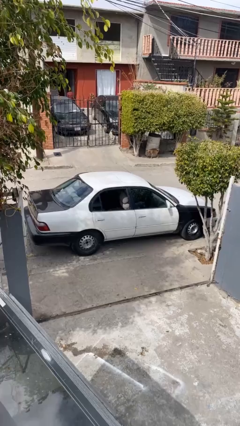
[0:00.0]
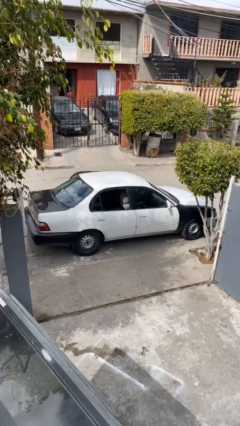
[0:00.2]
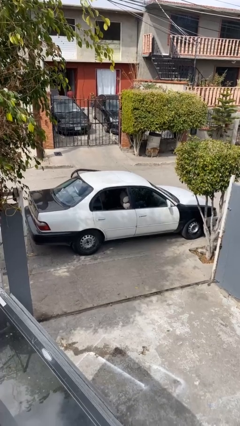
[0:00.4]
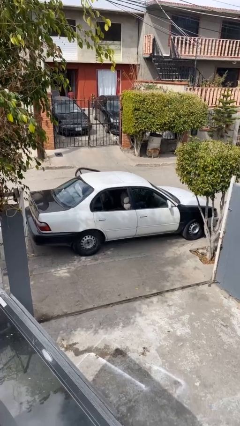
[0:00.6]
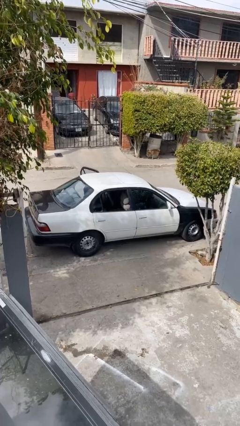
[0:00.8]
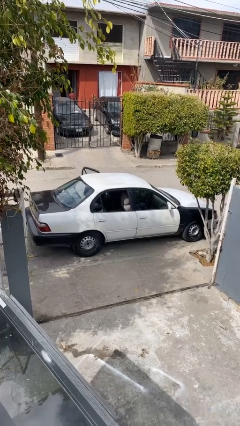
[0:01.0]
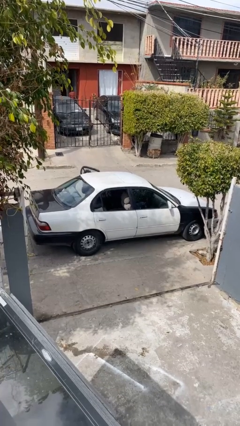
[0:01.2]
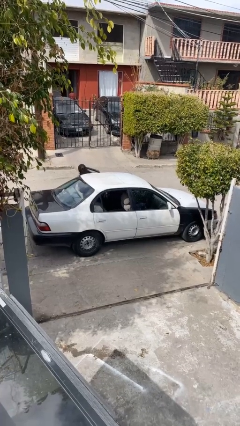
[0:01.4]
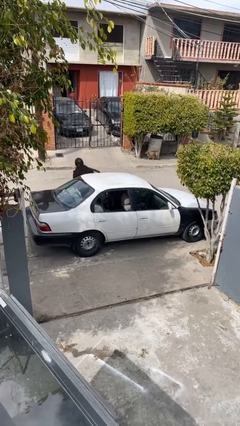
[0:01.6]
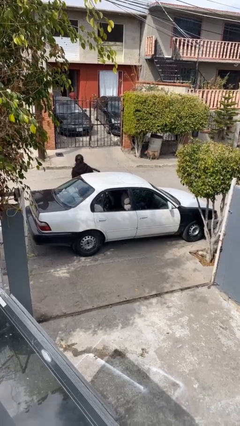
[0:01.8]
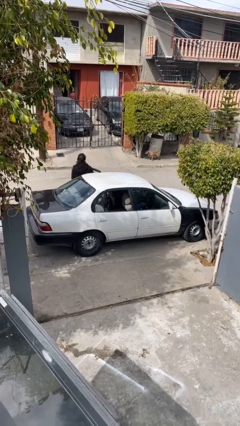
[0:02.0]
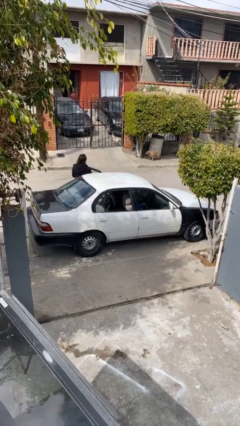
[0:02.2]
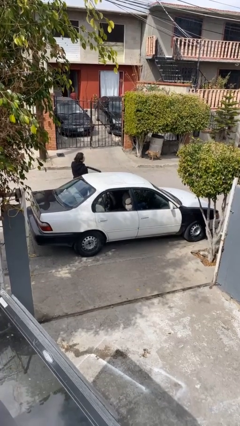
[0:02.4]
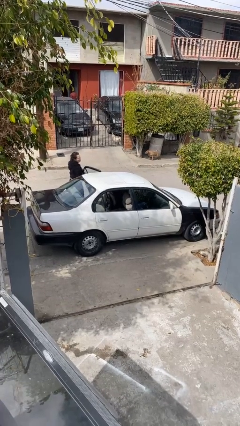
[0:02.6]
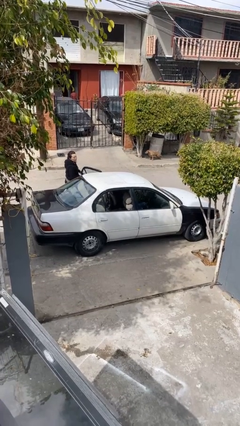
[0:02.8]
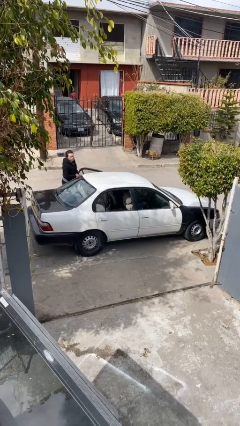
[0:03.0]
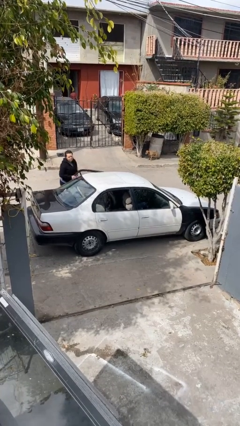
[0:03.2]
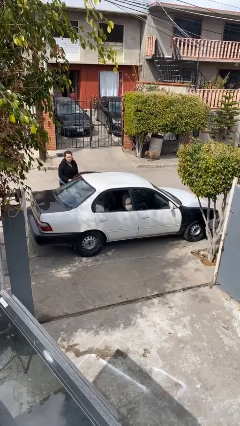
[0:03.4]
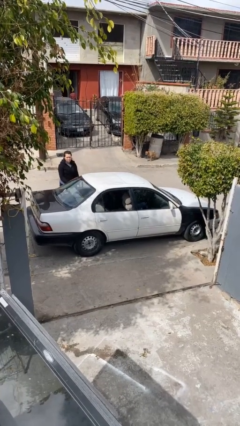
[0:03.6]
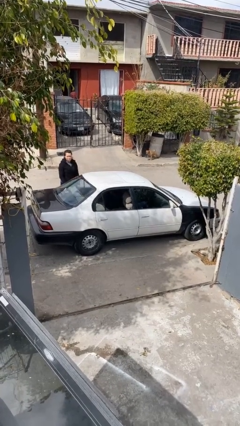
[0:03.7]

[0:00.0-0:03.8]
car drops off person

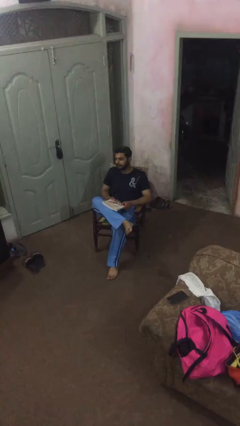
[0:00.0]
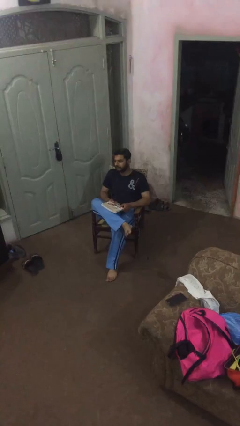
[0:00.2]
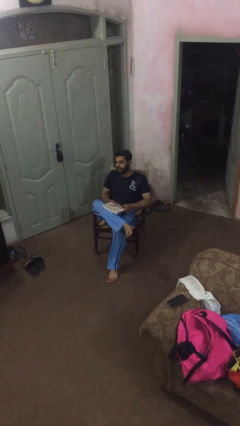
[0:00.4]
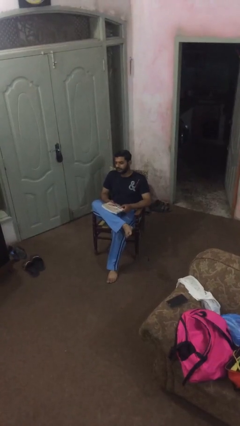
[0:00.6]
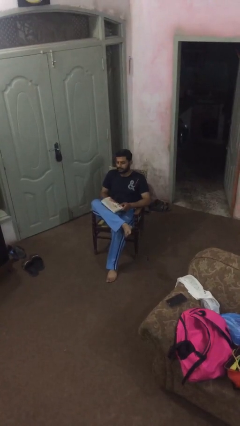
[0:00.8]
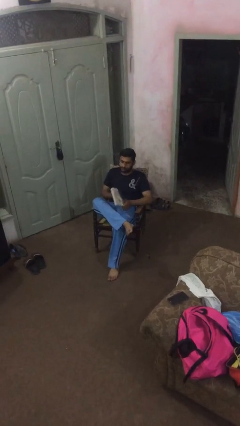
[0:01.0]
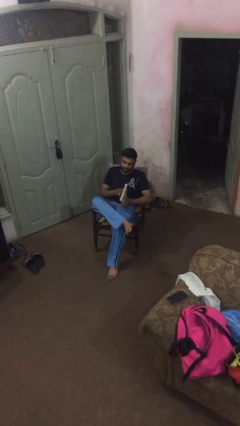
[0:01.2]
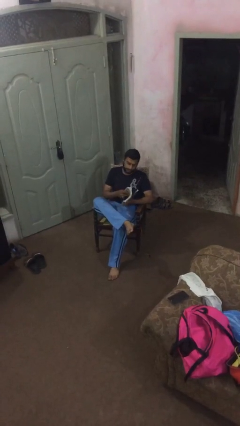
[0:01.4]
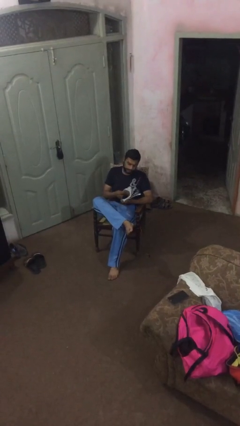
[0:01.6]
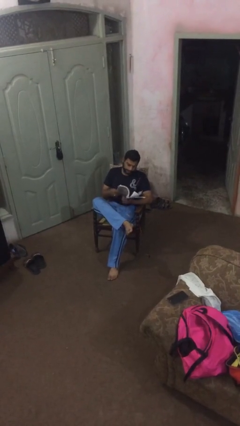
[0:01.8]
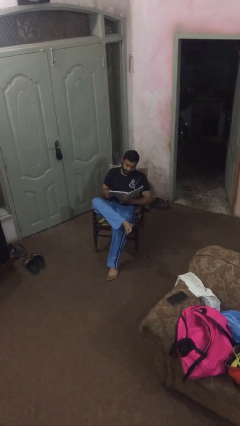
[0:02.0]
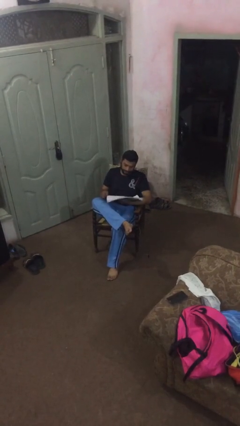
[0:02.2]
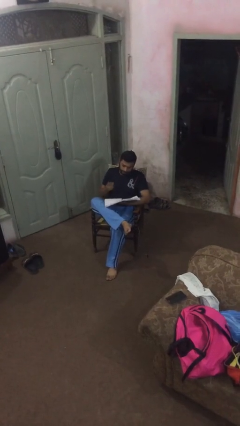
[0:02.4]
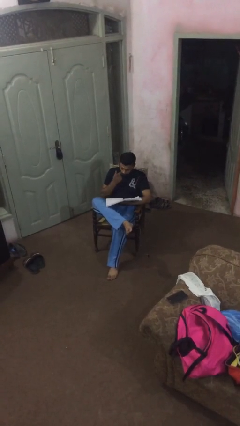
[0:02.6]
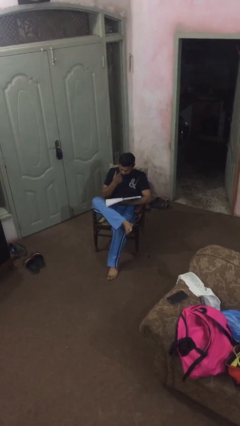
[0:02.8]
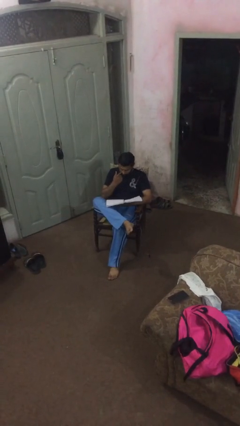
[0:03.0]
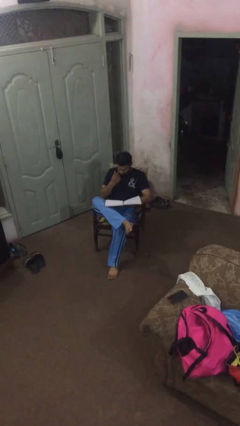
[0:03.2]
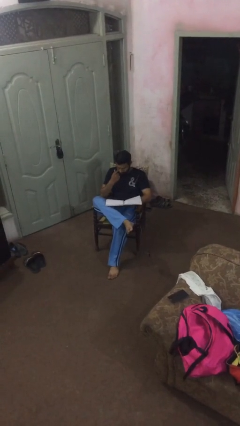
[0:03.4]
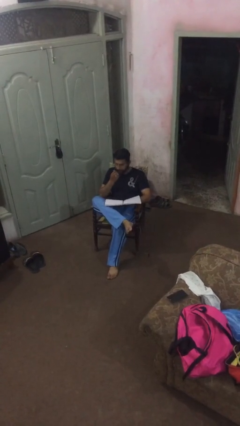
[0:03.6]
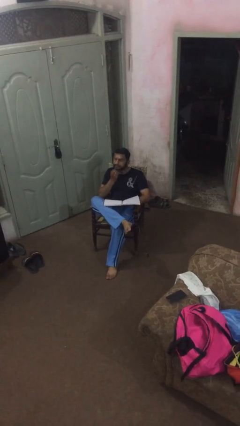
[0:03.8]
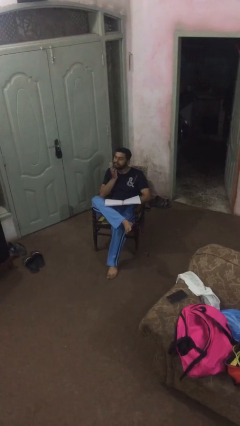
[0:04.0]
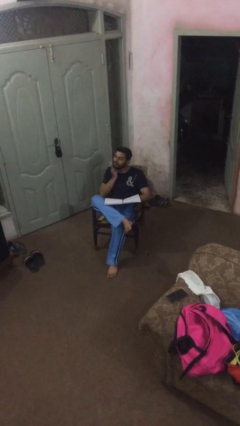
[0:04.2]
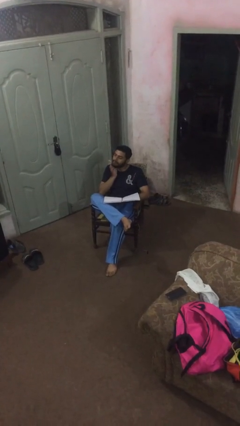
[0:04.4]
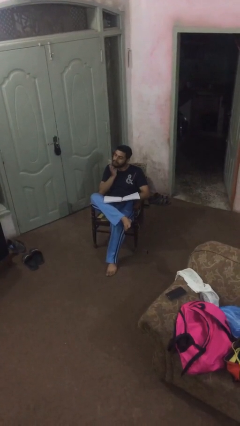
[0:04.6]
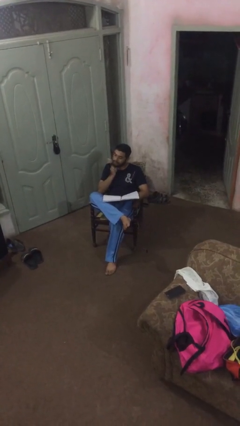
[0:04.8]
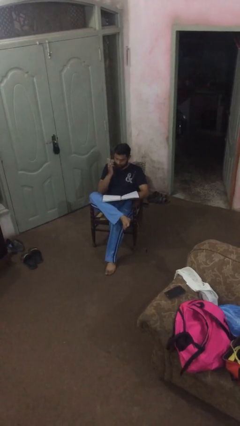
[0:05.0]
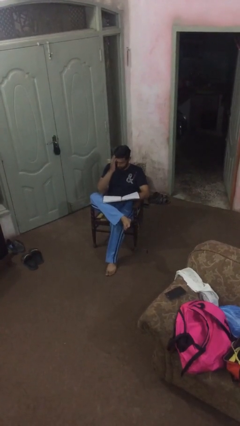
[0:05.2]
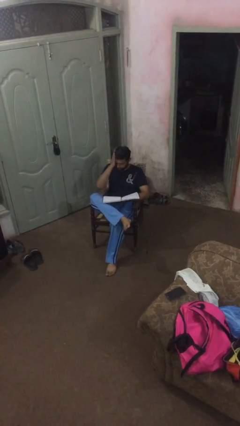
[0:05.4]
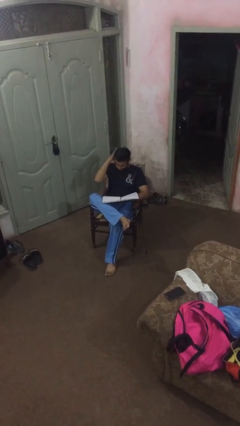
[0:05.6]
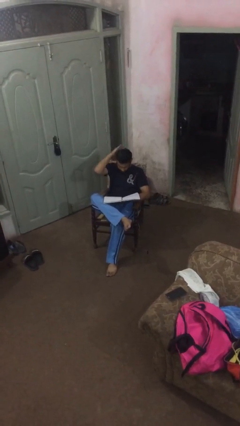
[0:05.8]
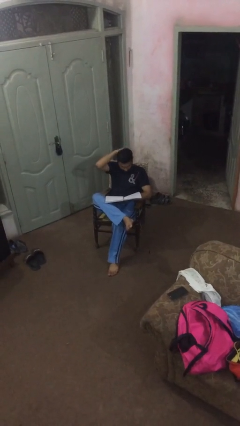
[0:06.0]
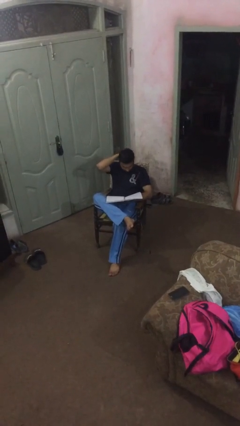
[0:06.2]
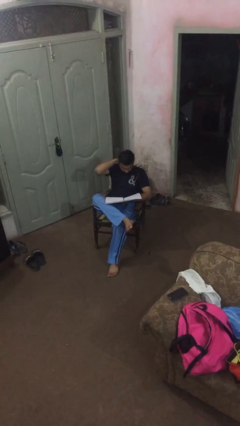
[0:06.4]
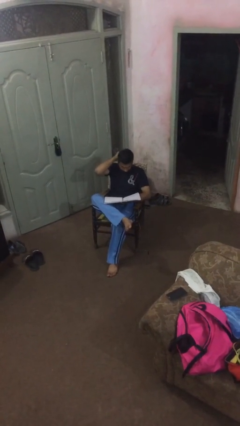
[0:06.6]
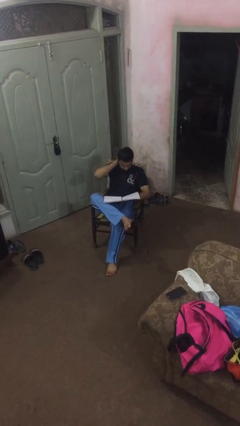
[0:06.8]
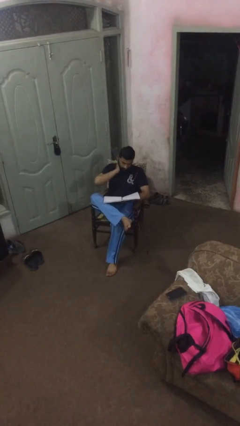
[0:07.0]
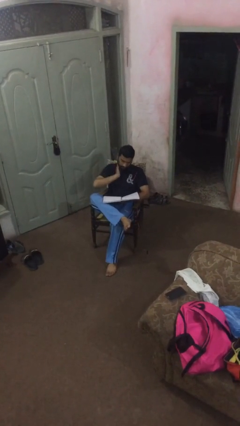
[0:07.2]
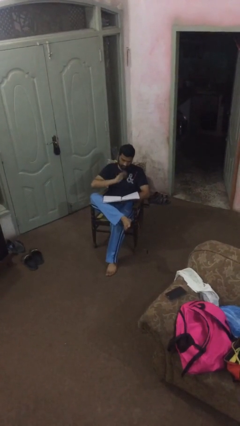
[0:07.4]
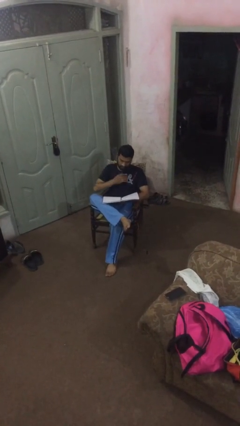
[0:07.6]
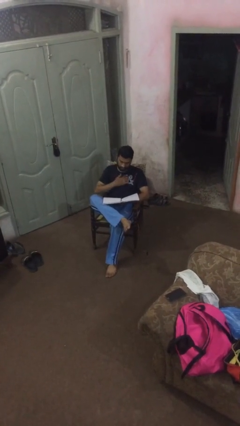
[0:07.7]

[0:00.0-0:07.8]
person reads document

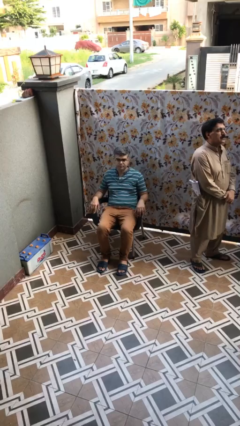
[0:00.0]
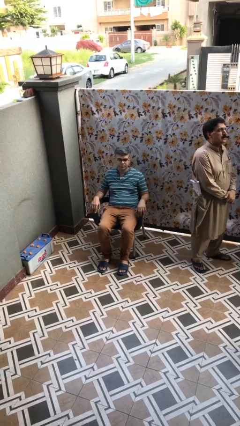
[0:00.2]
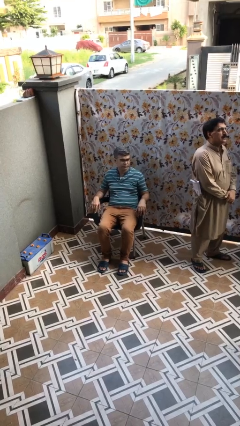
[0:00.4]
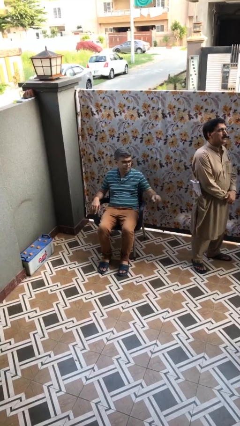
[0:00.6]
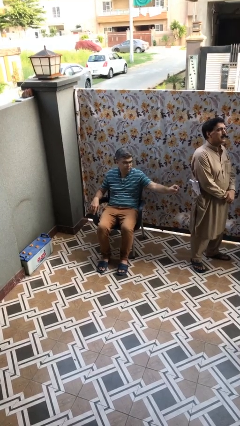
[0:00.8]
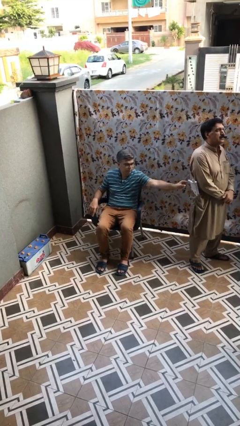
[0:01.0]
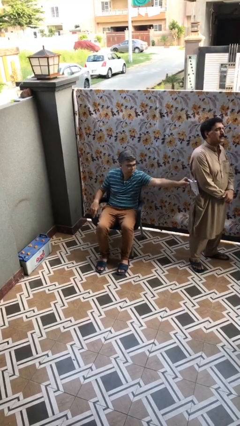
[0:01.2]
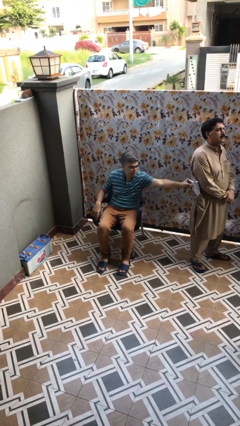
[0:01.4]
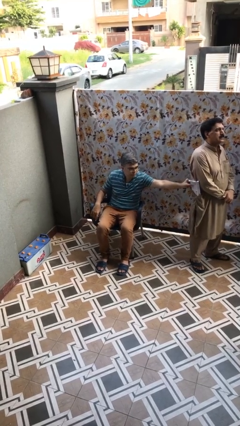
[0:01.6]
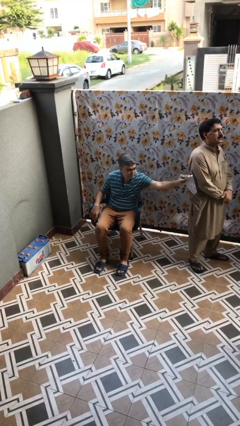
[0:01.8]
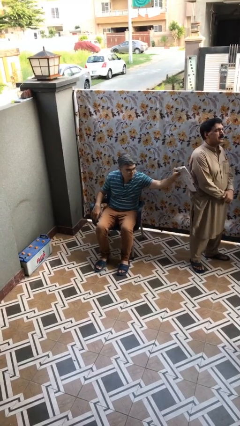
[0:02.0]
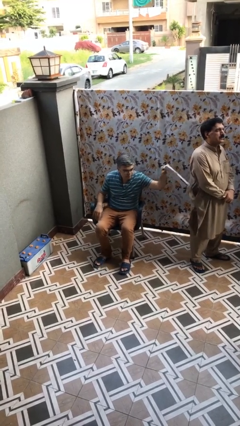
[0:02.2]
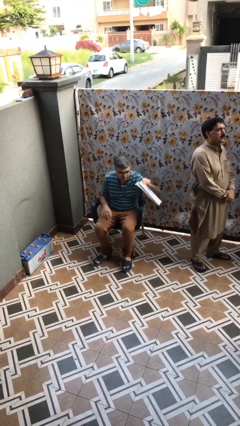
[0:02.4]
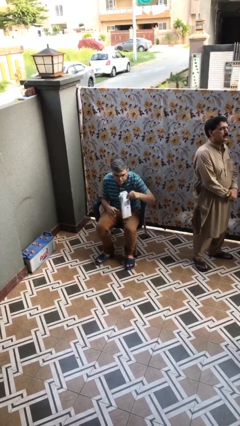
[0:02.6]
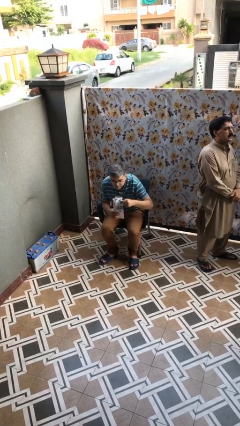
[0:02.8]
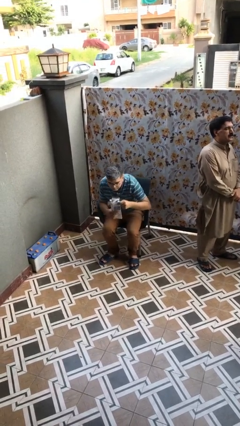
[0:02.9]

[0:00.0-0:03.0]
person steals object from person

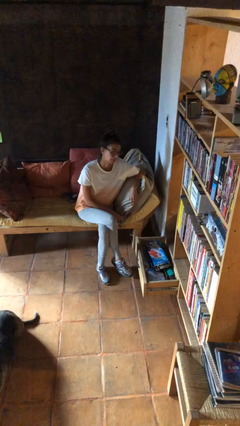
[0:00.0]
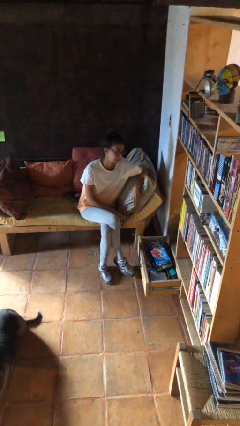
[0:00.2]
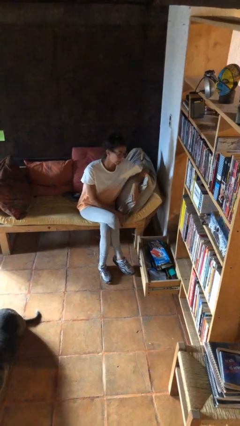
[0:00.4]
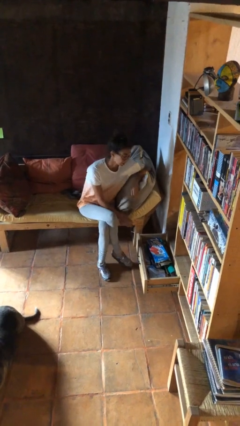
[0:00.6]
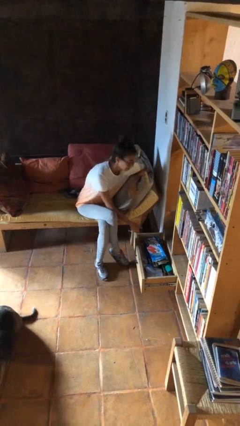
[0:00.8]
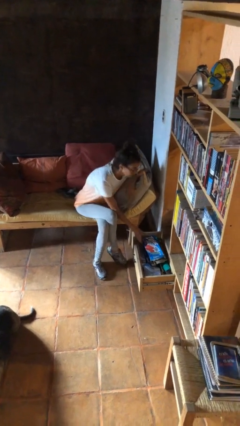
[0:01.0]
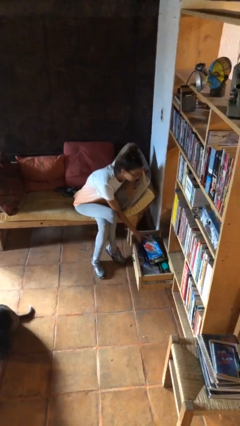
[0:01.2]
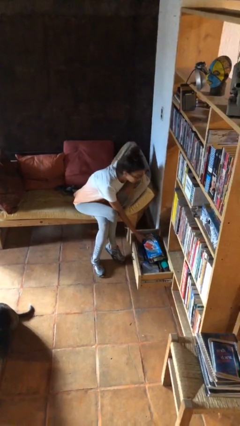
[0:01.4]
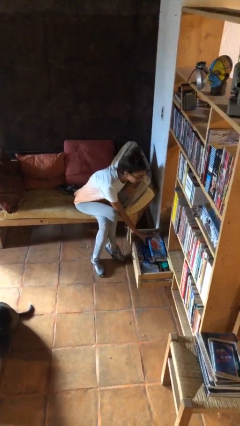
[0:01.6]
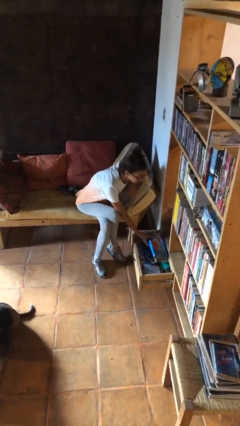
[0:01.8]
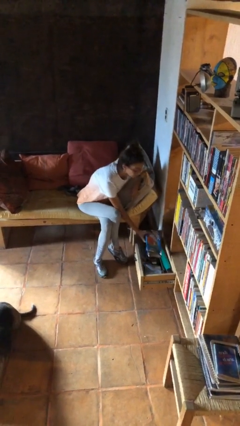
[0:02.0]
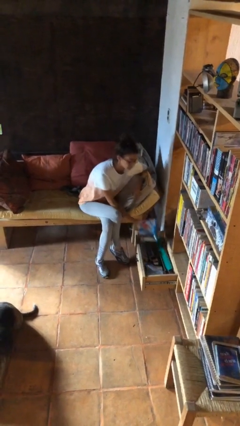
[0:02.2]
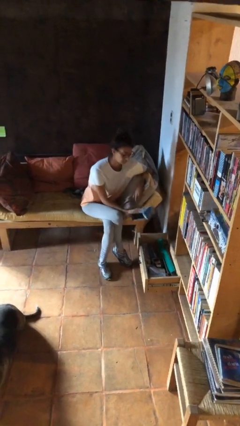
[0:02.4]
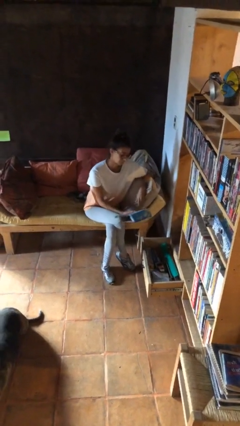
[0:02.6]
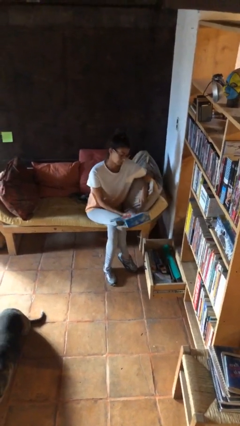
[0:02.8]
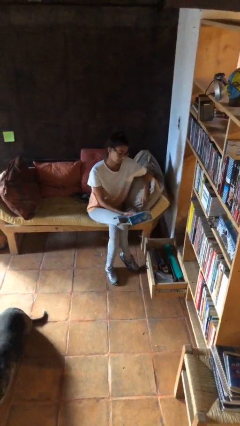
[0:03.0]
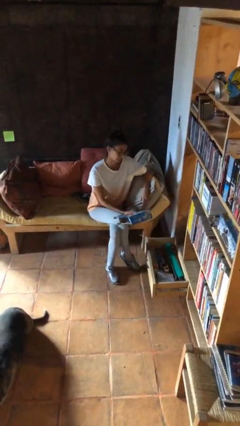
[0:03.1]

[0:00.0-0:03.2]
person picks up object from cabinet

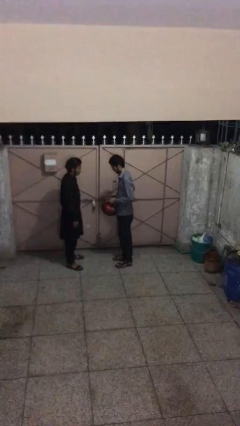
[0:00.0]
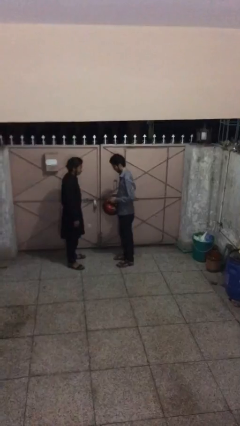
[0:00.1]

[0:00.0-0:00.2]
person transfers object to person
